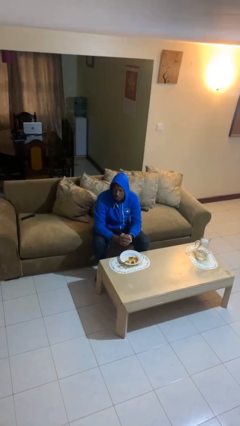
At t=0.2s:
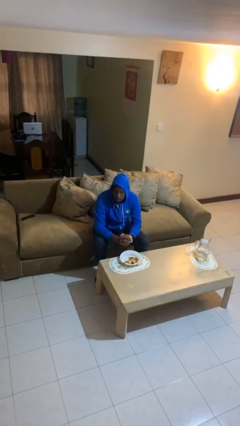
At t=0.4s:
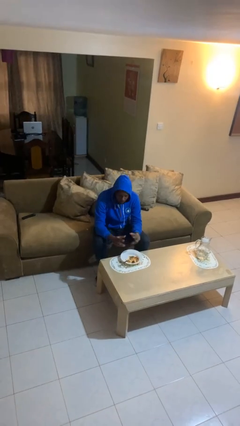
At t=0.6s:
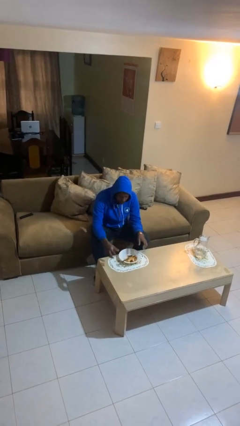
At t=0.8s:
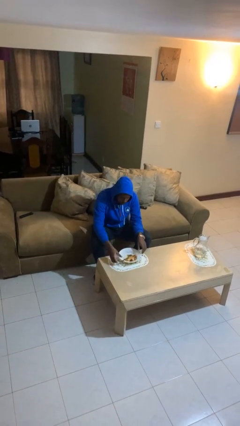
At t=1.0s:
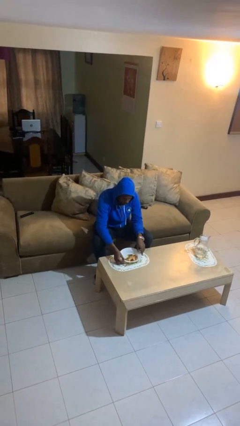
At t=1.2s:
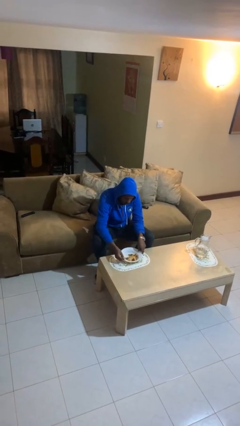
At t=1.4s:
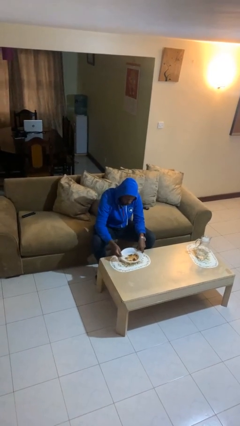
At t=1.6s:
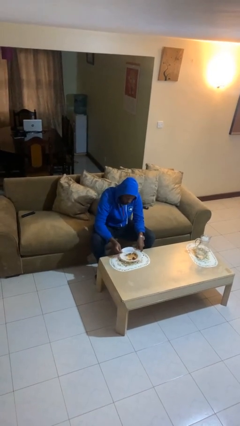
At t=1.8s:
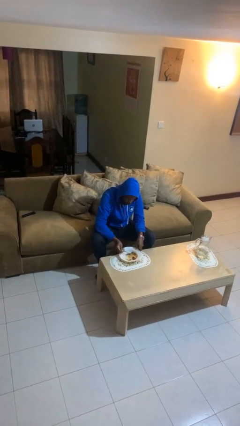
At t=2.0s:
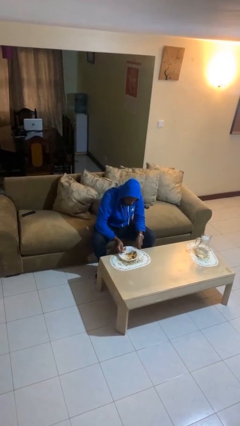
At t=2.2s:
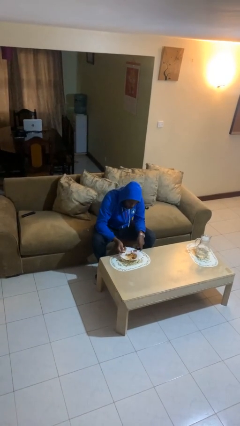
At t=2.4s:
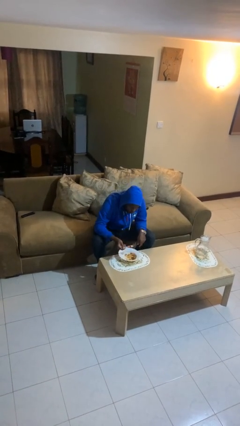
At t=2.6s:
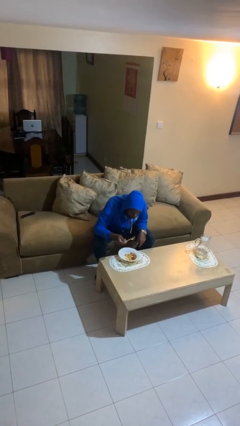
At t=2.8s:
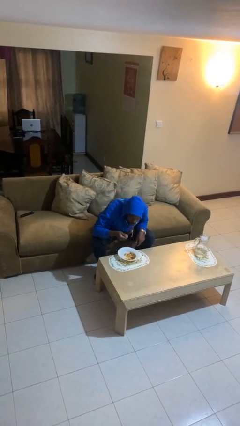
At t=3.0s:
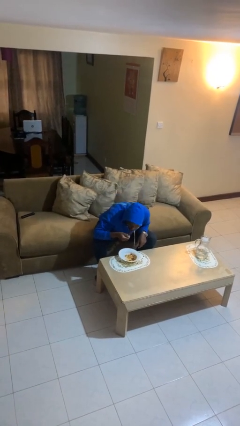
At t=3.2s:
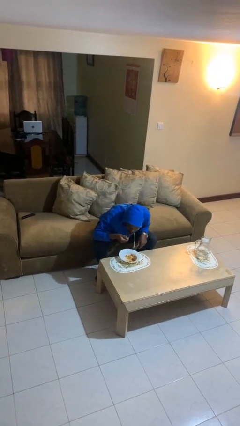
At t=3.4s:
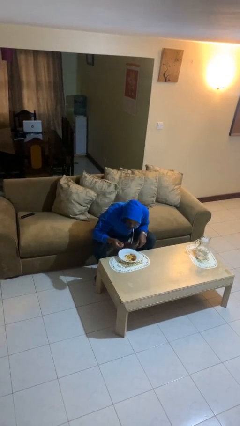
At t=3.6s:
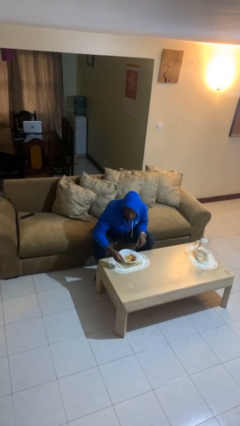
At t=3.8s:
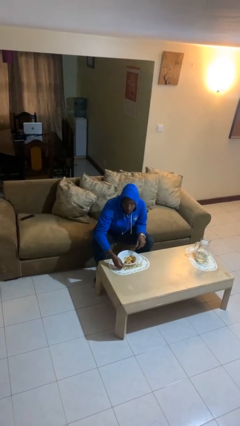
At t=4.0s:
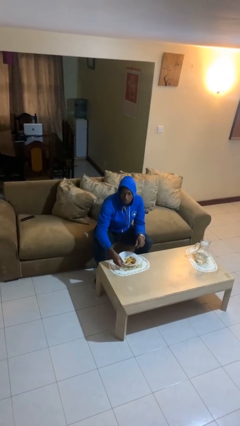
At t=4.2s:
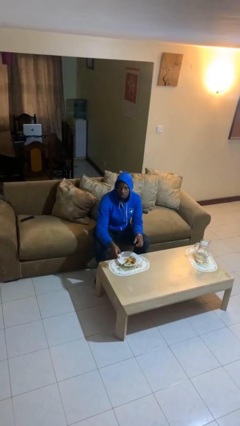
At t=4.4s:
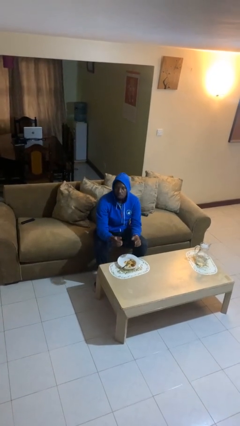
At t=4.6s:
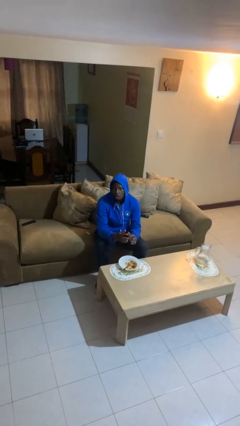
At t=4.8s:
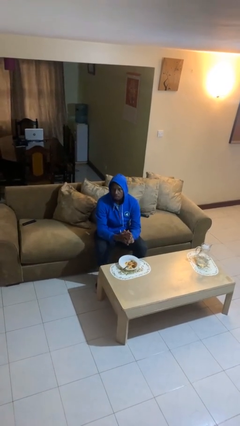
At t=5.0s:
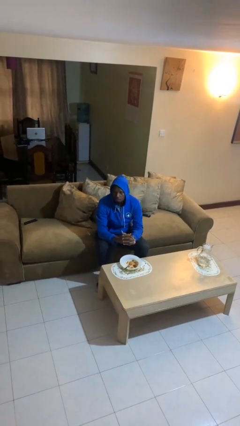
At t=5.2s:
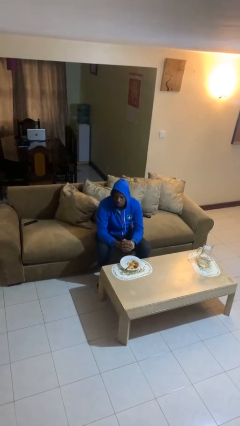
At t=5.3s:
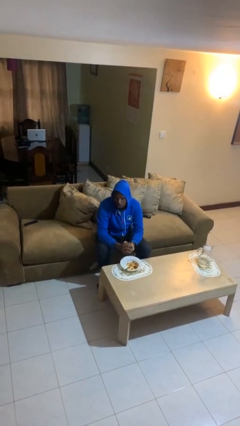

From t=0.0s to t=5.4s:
person eats with utensil

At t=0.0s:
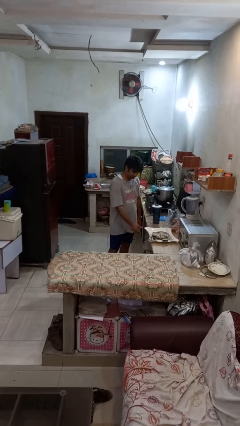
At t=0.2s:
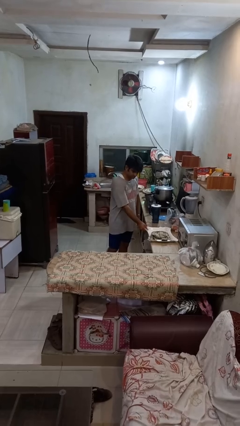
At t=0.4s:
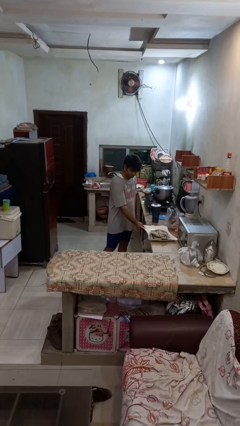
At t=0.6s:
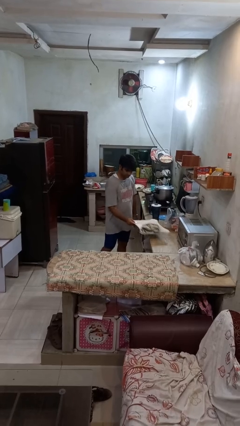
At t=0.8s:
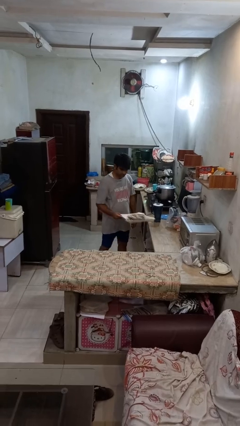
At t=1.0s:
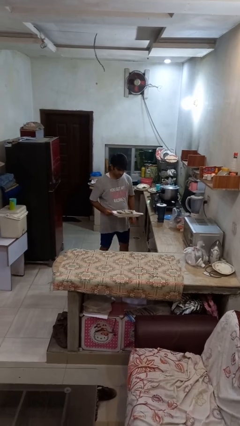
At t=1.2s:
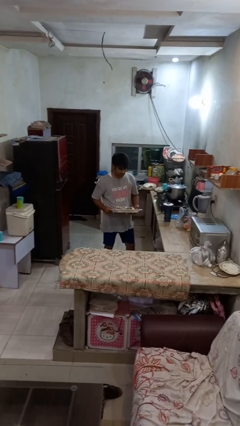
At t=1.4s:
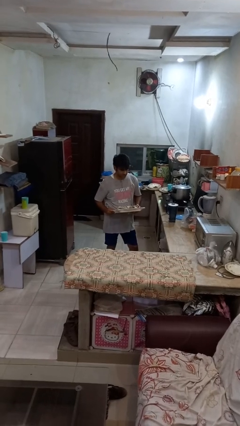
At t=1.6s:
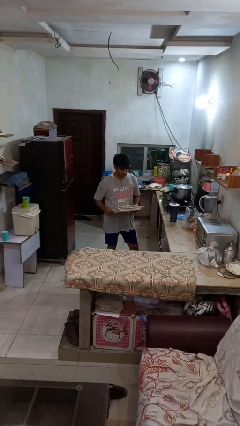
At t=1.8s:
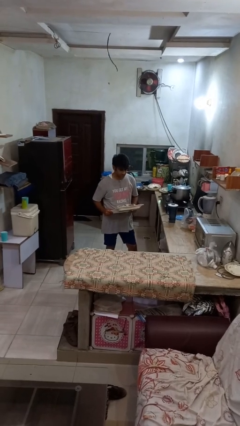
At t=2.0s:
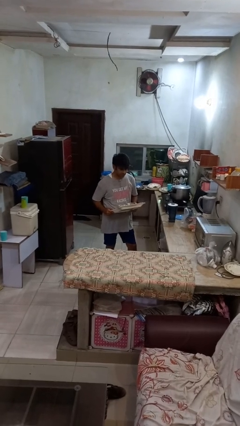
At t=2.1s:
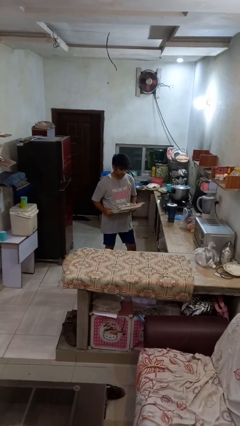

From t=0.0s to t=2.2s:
person picks up object from countertop

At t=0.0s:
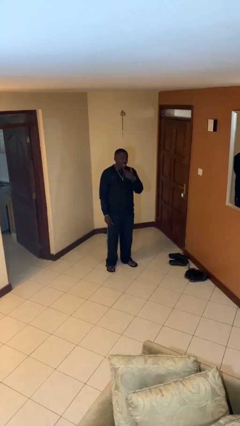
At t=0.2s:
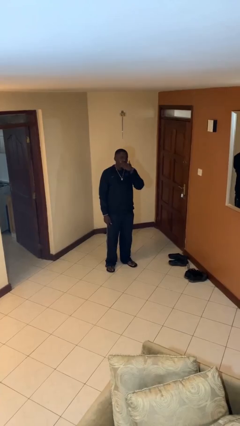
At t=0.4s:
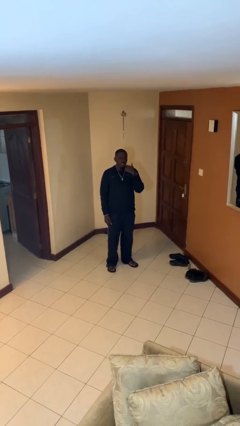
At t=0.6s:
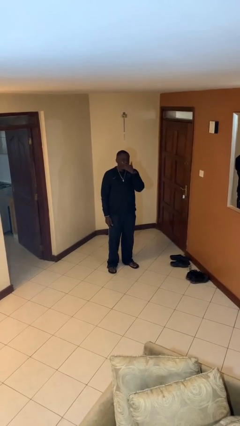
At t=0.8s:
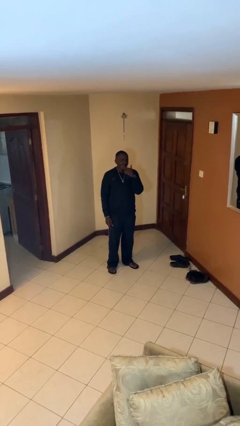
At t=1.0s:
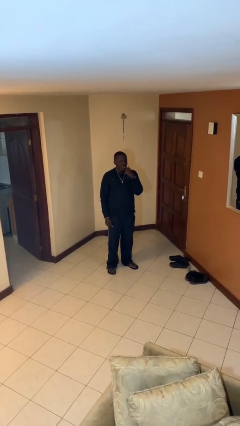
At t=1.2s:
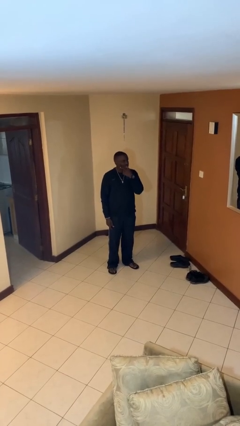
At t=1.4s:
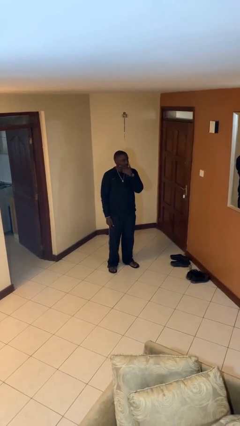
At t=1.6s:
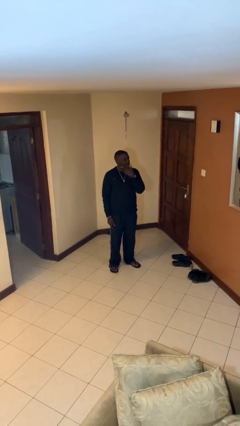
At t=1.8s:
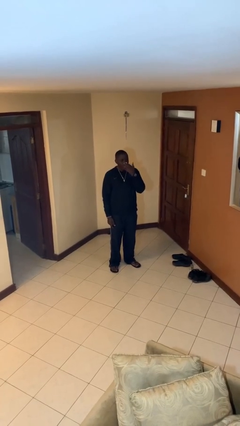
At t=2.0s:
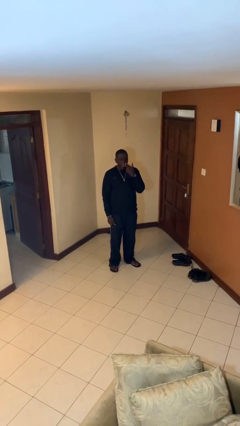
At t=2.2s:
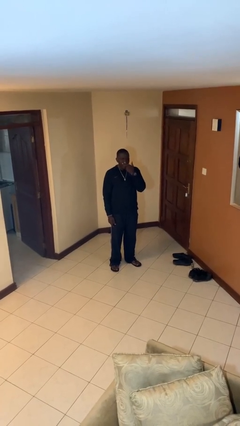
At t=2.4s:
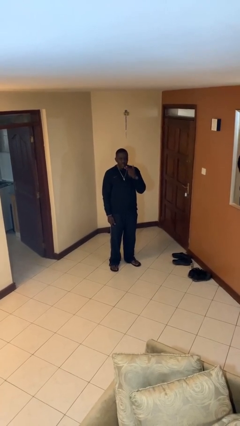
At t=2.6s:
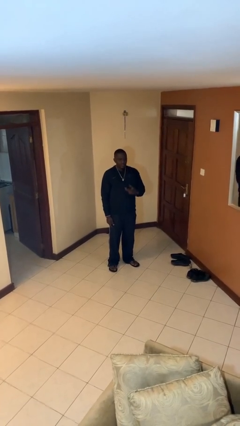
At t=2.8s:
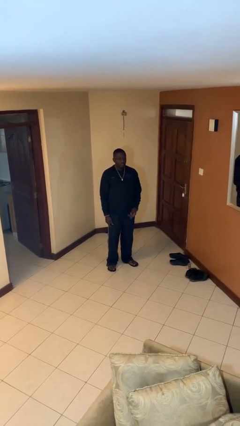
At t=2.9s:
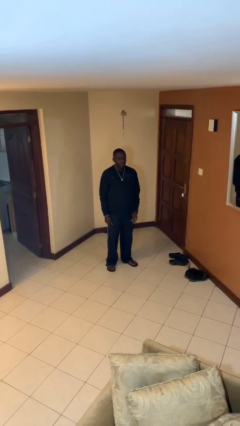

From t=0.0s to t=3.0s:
person licks fingers

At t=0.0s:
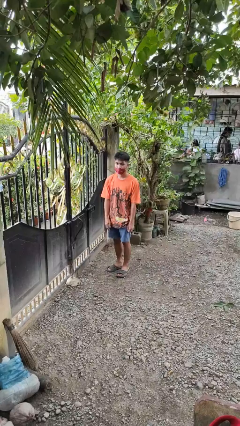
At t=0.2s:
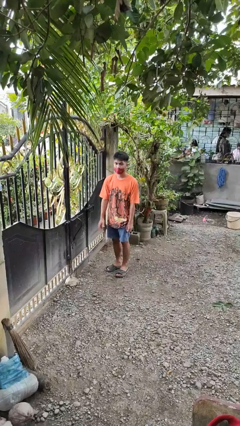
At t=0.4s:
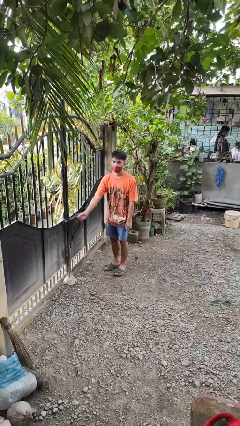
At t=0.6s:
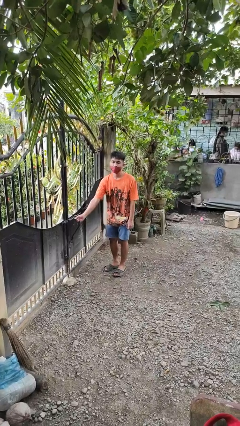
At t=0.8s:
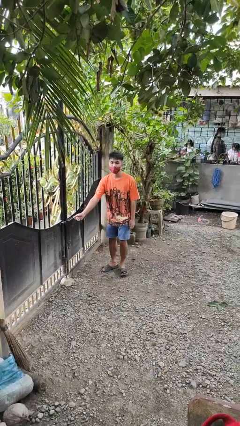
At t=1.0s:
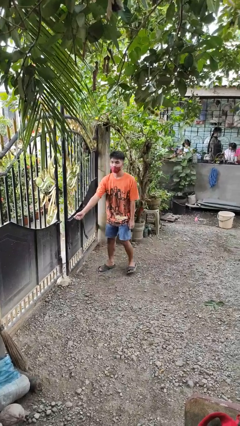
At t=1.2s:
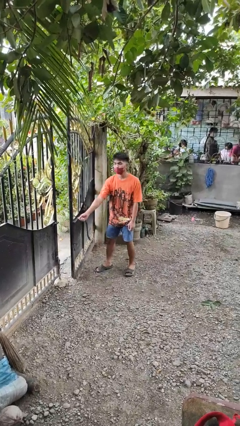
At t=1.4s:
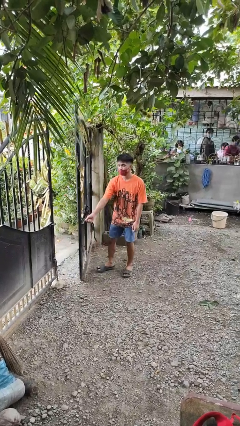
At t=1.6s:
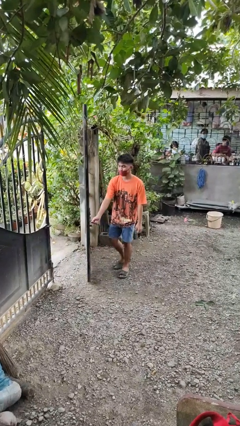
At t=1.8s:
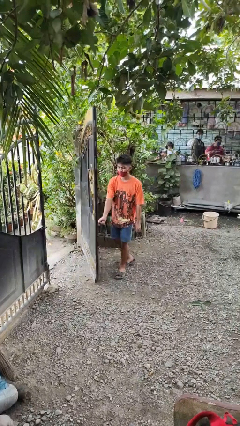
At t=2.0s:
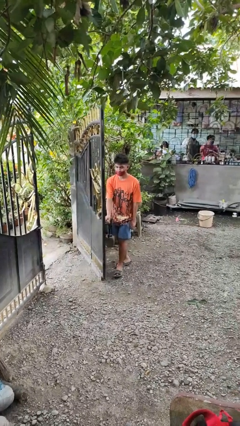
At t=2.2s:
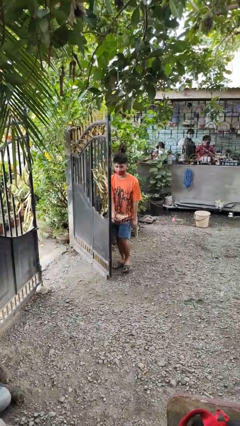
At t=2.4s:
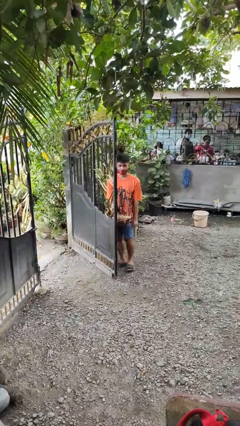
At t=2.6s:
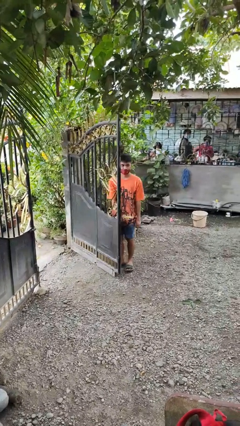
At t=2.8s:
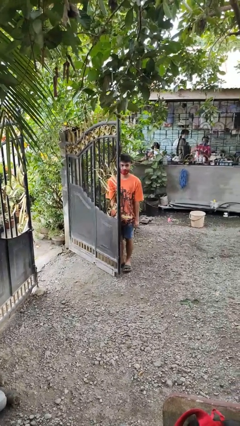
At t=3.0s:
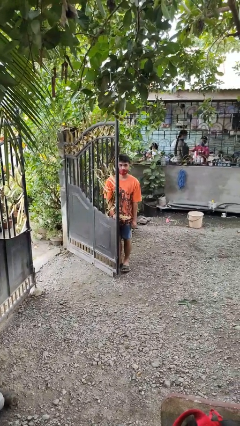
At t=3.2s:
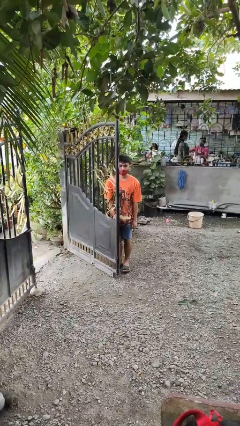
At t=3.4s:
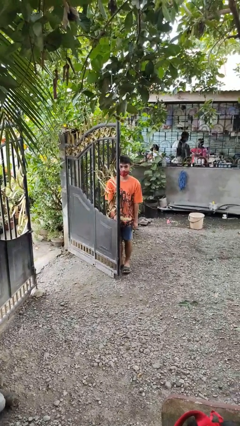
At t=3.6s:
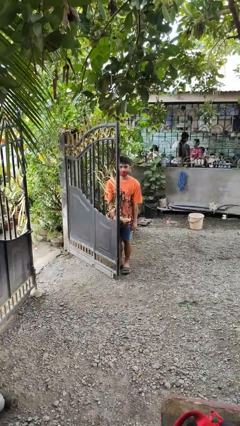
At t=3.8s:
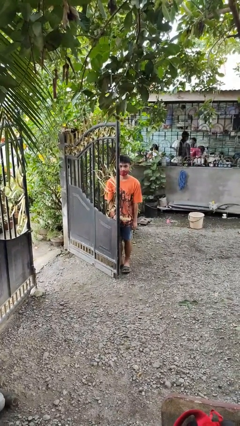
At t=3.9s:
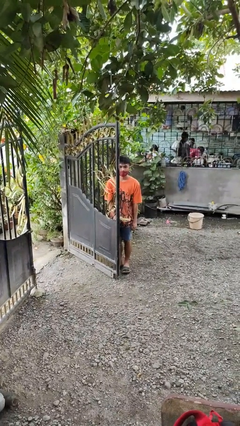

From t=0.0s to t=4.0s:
person opens gate

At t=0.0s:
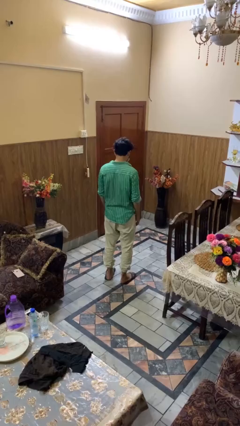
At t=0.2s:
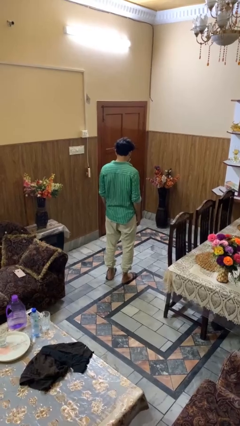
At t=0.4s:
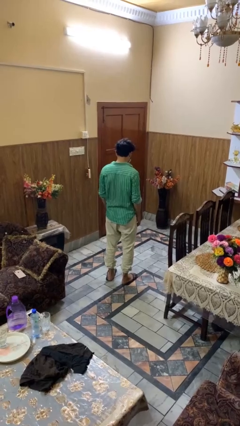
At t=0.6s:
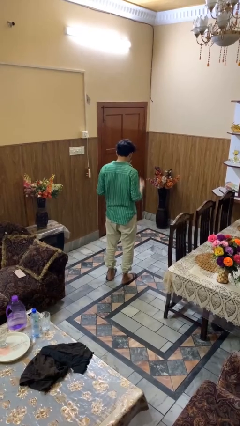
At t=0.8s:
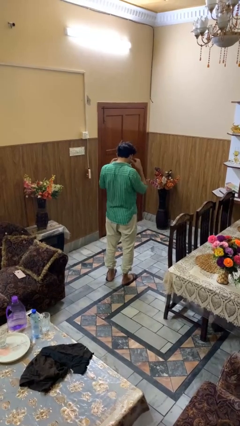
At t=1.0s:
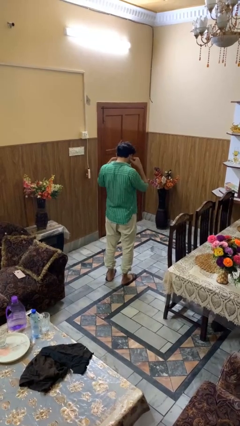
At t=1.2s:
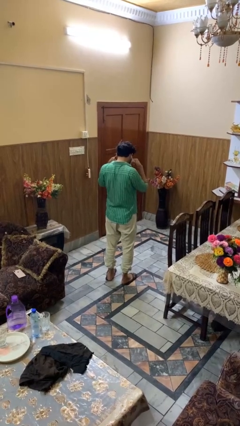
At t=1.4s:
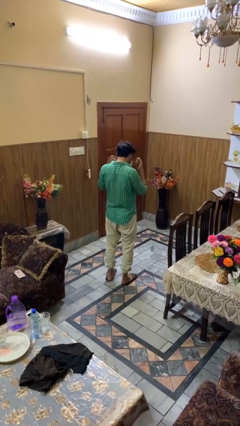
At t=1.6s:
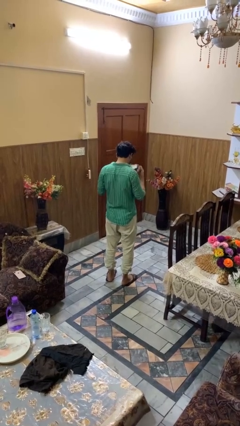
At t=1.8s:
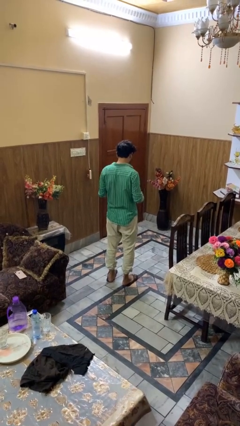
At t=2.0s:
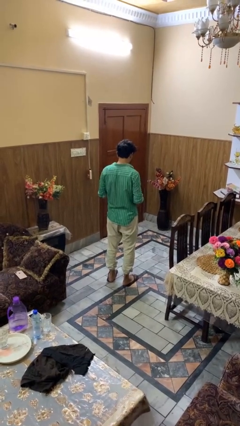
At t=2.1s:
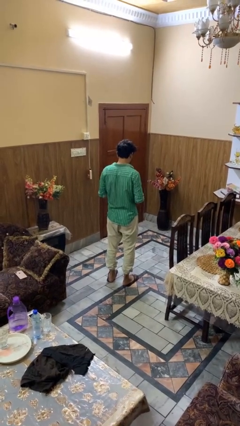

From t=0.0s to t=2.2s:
person takes off facemask

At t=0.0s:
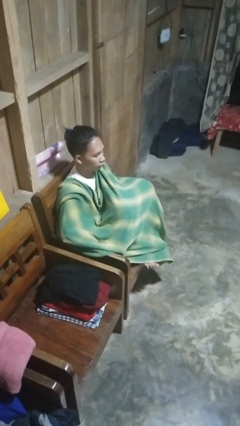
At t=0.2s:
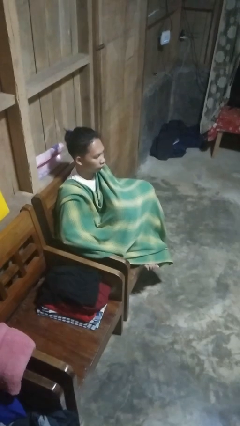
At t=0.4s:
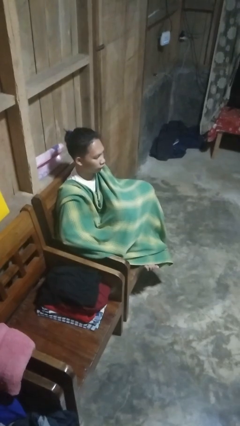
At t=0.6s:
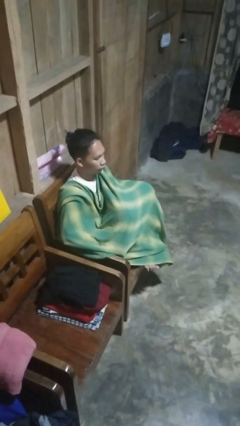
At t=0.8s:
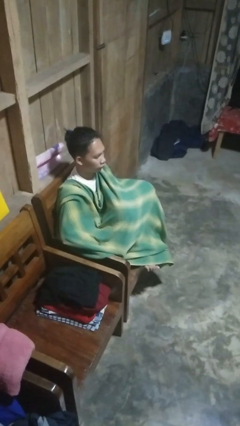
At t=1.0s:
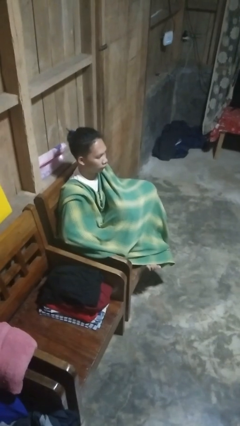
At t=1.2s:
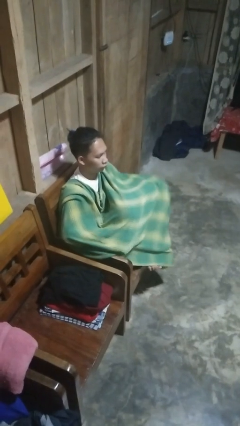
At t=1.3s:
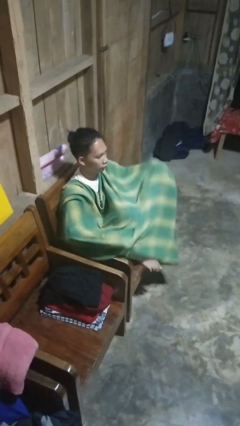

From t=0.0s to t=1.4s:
person uncovers with blanket
